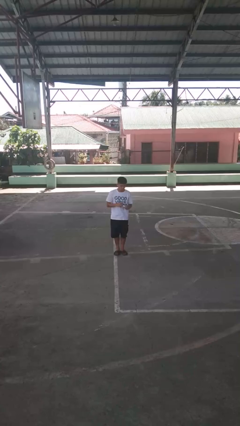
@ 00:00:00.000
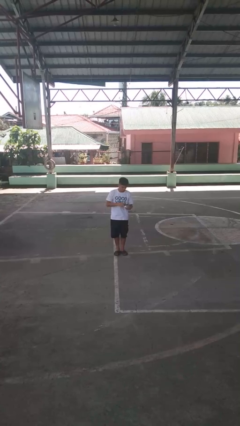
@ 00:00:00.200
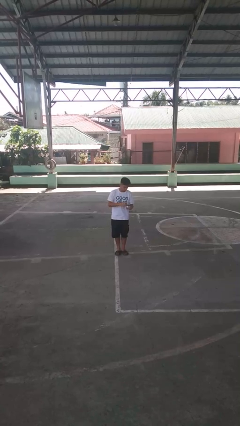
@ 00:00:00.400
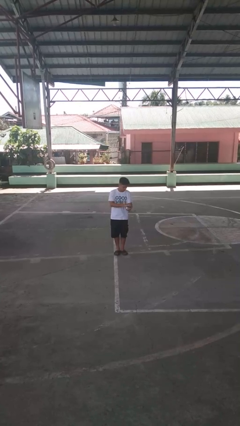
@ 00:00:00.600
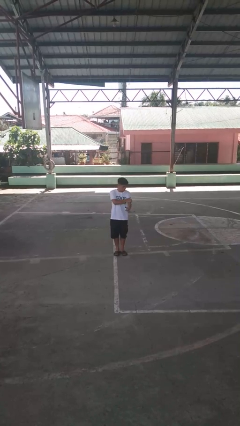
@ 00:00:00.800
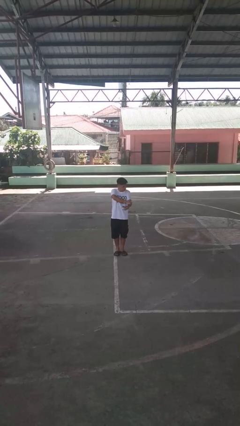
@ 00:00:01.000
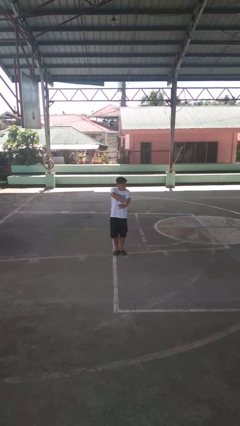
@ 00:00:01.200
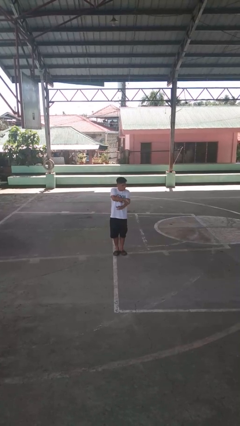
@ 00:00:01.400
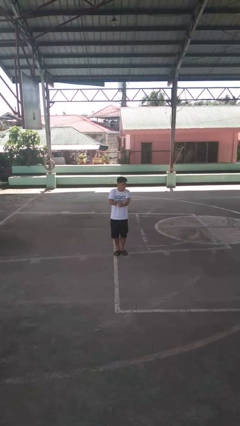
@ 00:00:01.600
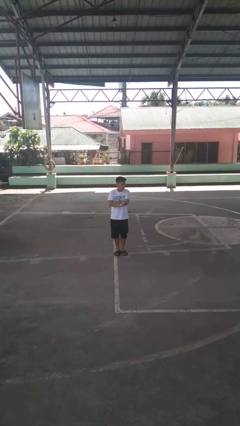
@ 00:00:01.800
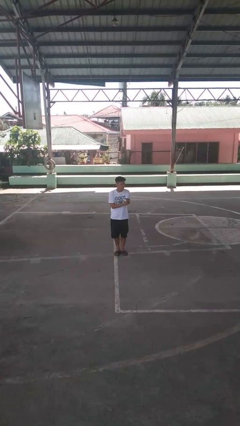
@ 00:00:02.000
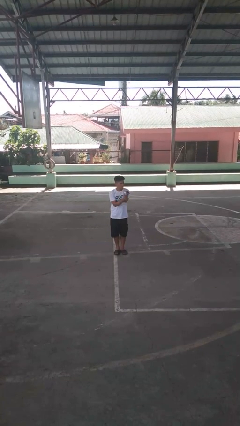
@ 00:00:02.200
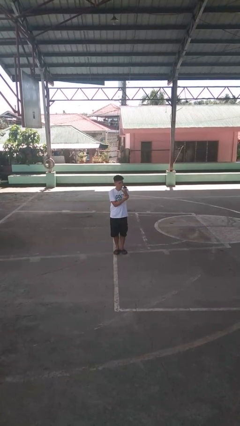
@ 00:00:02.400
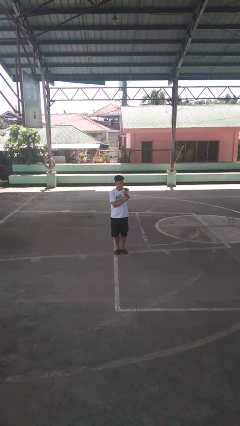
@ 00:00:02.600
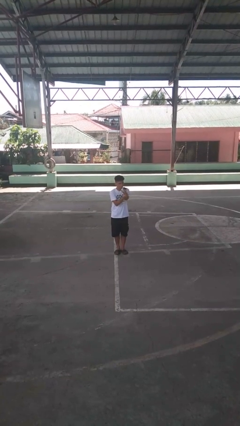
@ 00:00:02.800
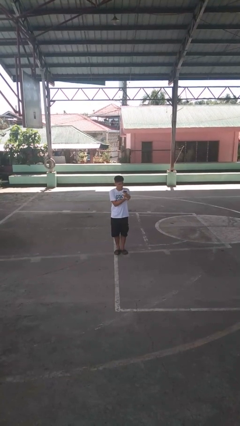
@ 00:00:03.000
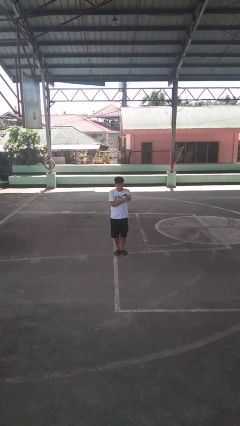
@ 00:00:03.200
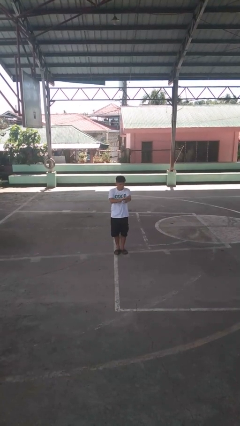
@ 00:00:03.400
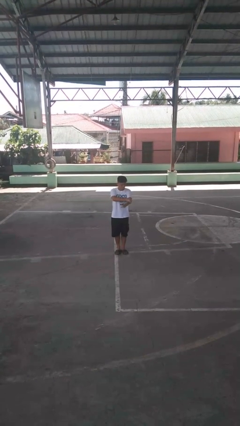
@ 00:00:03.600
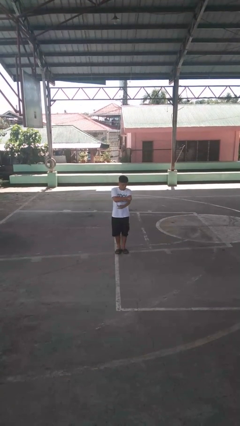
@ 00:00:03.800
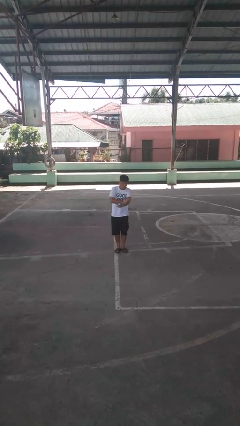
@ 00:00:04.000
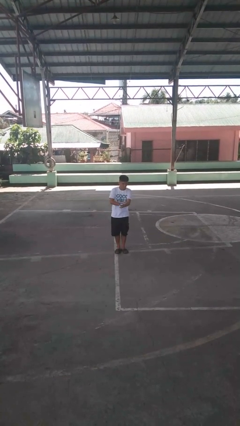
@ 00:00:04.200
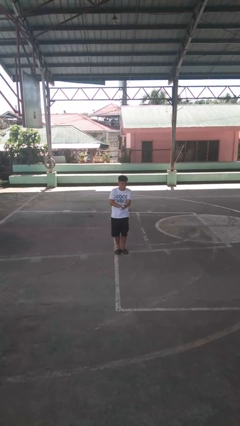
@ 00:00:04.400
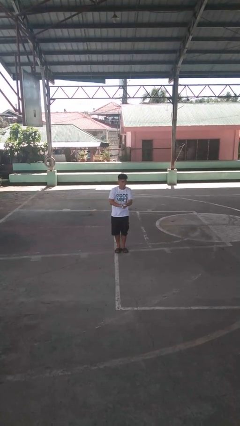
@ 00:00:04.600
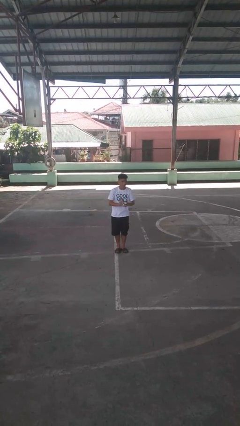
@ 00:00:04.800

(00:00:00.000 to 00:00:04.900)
person applies sunscreen

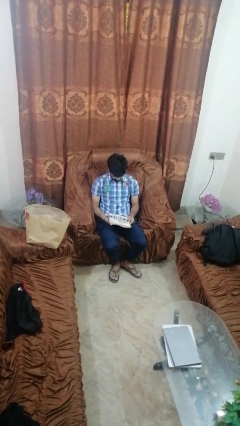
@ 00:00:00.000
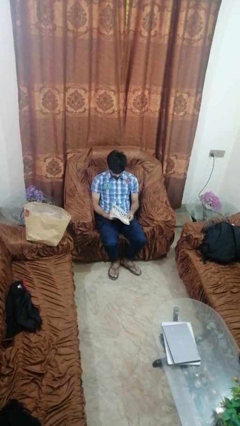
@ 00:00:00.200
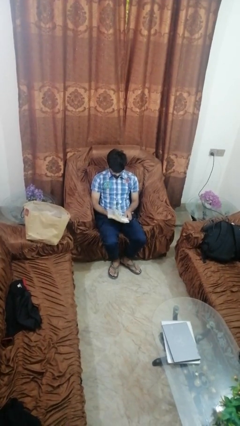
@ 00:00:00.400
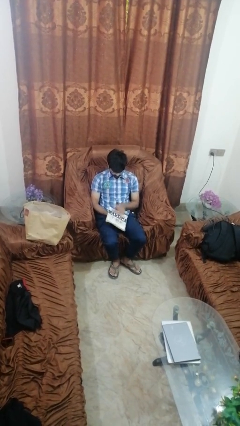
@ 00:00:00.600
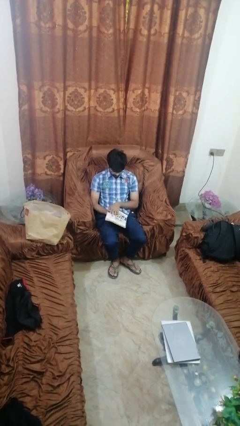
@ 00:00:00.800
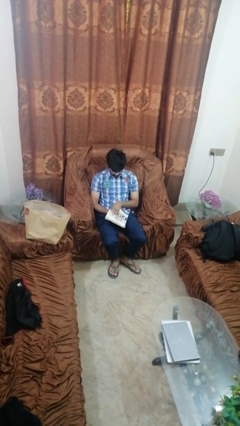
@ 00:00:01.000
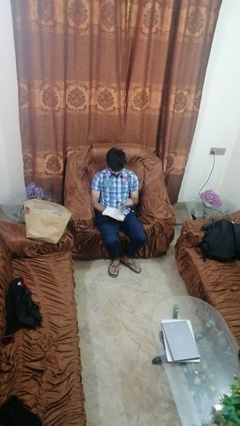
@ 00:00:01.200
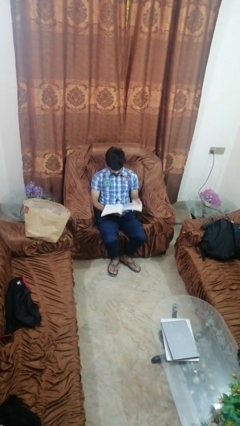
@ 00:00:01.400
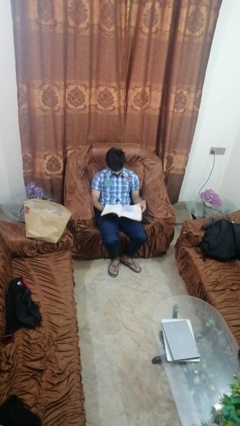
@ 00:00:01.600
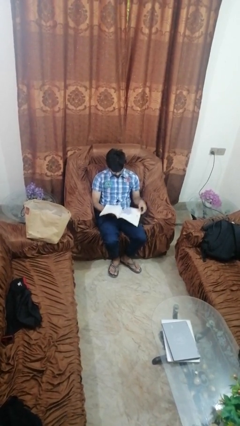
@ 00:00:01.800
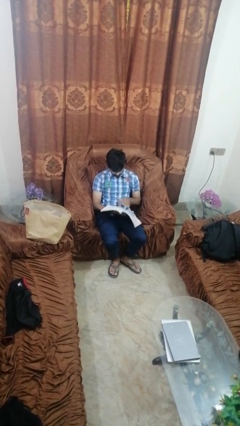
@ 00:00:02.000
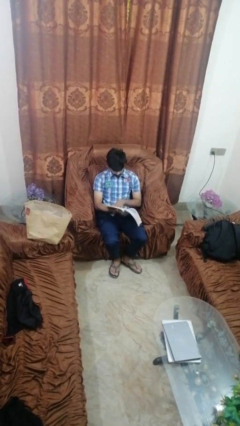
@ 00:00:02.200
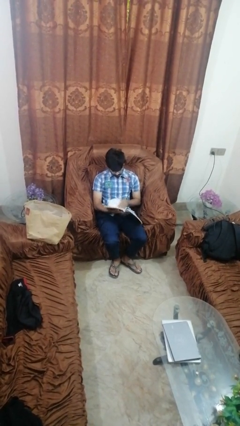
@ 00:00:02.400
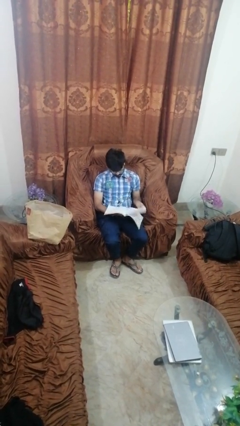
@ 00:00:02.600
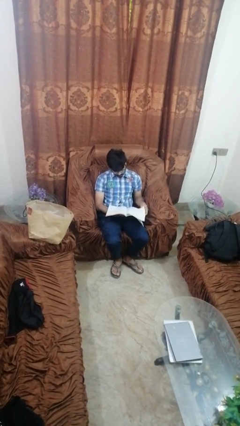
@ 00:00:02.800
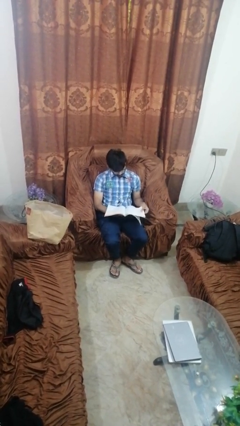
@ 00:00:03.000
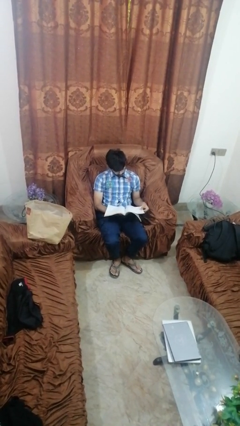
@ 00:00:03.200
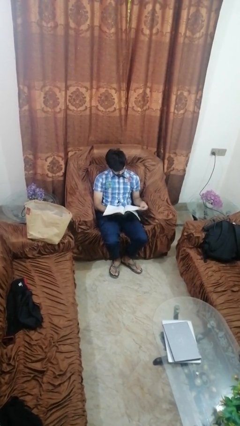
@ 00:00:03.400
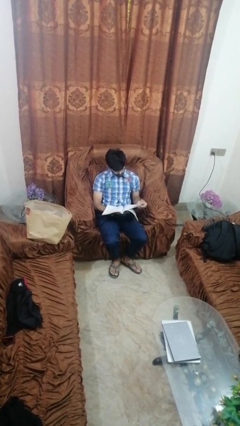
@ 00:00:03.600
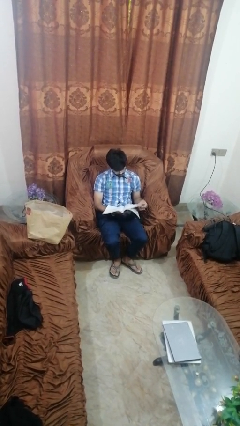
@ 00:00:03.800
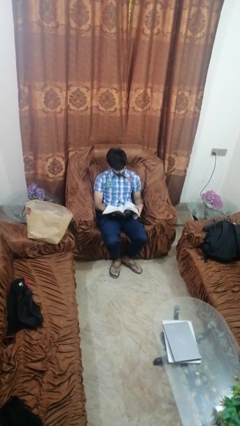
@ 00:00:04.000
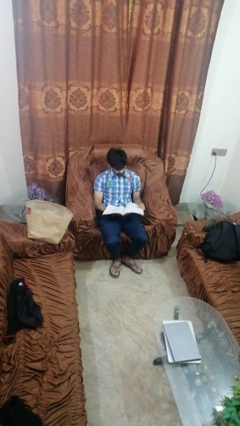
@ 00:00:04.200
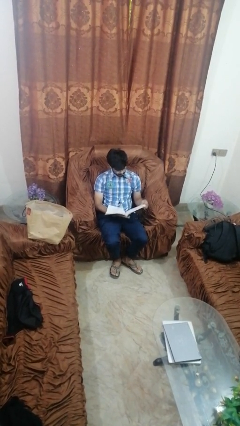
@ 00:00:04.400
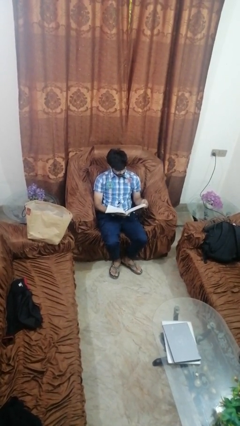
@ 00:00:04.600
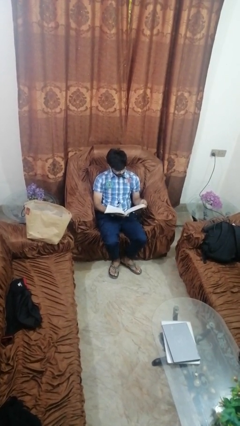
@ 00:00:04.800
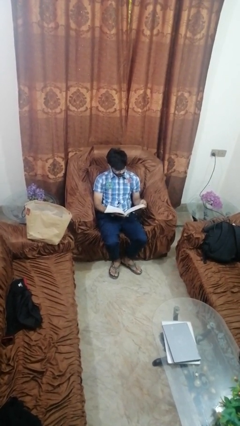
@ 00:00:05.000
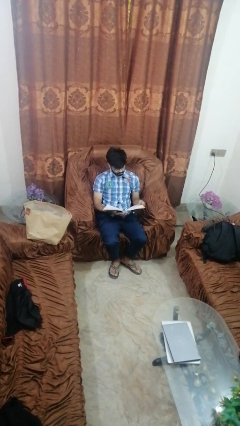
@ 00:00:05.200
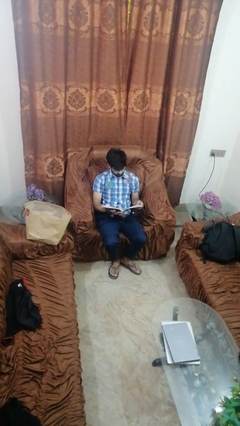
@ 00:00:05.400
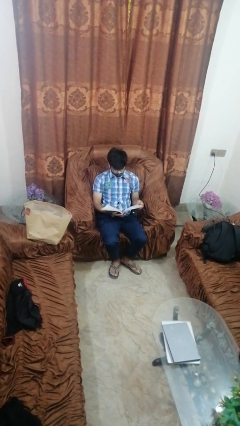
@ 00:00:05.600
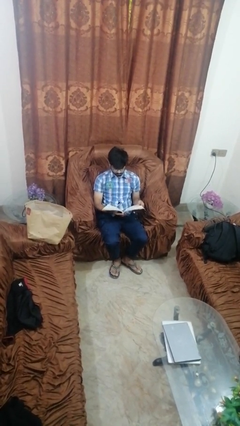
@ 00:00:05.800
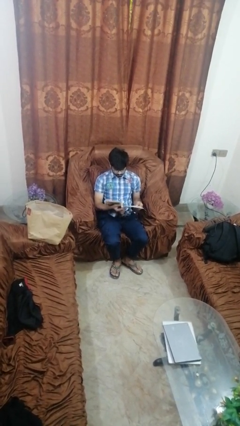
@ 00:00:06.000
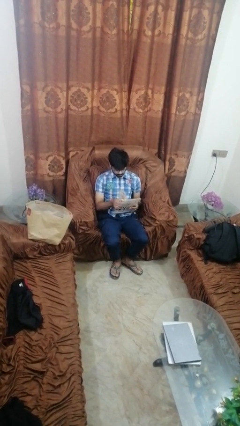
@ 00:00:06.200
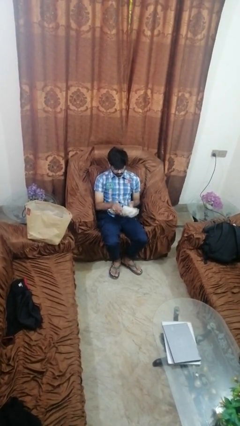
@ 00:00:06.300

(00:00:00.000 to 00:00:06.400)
person reads magazine

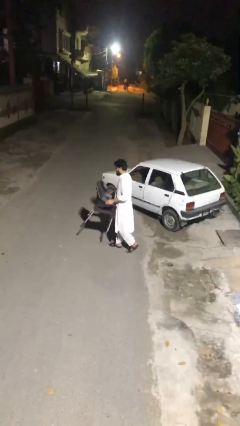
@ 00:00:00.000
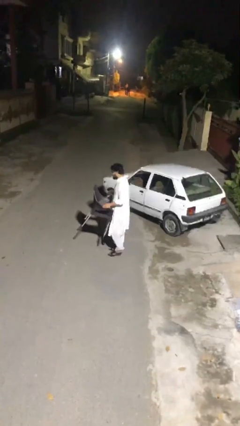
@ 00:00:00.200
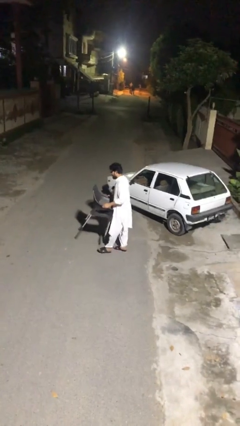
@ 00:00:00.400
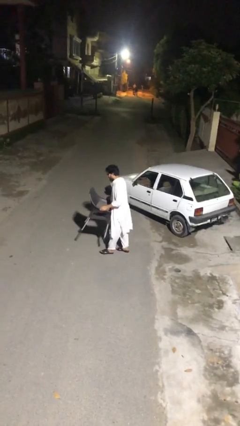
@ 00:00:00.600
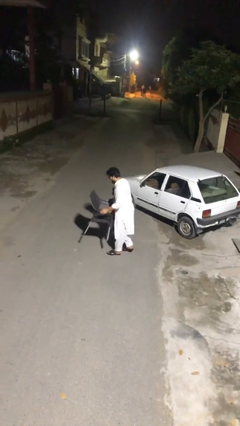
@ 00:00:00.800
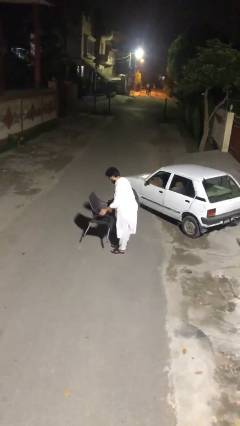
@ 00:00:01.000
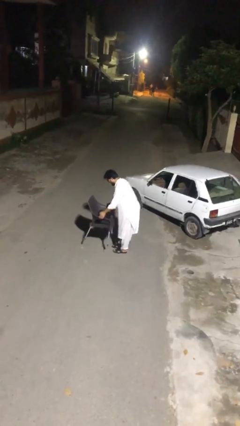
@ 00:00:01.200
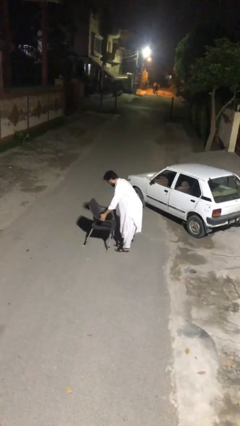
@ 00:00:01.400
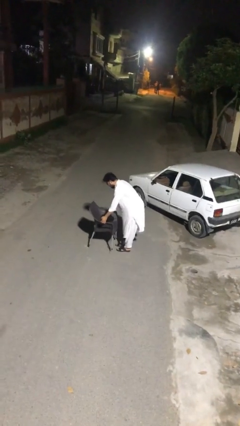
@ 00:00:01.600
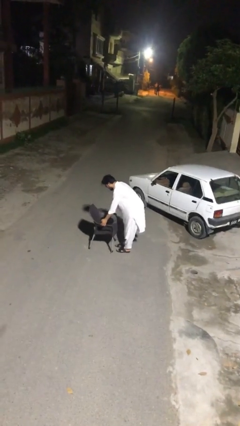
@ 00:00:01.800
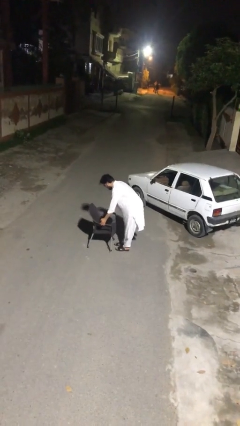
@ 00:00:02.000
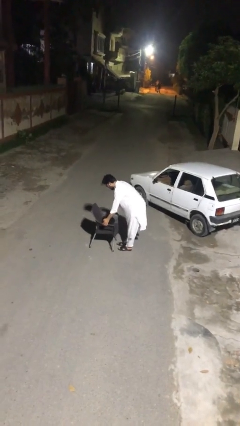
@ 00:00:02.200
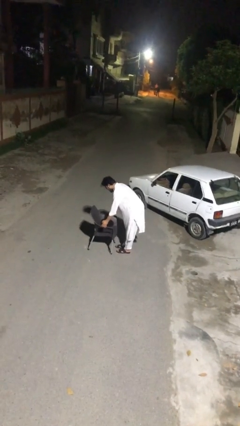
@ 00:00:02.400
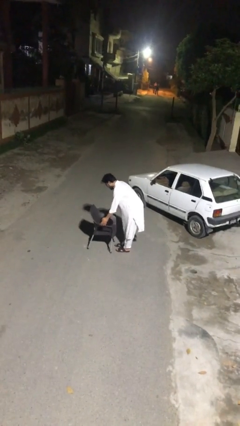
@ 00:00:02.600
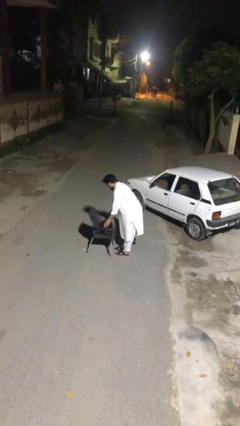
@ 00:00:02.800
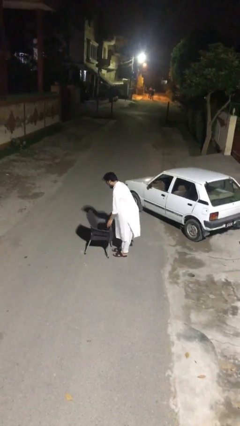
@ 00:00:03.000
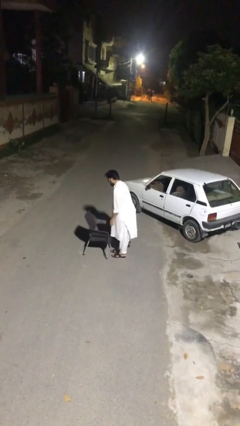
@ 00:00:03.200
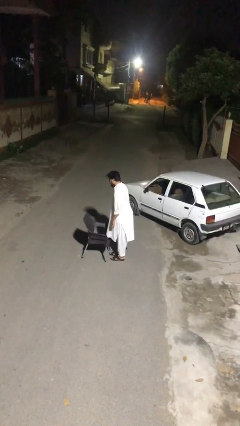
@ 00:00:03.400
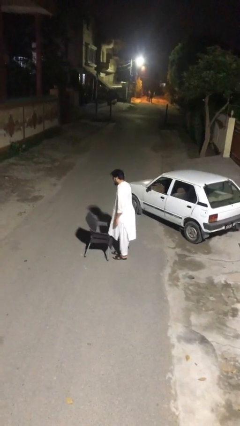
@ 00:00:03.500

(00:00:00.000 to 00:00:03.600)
person puts down object on floor

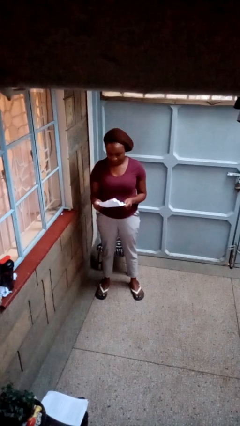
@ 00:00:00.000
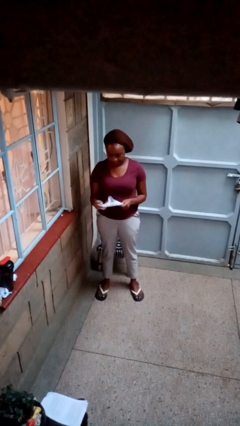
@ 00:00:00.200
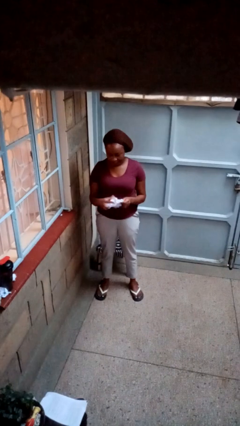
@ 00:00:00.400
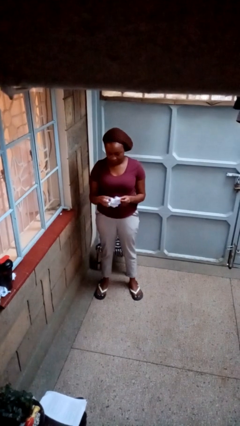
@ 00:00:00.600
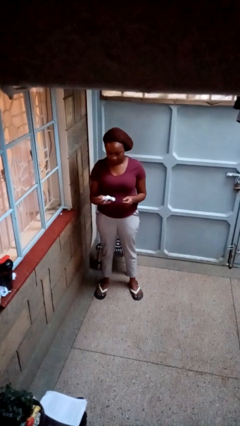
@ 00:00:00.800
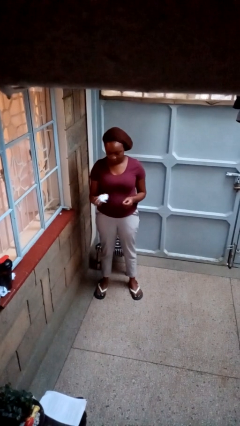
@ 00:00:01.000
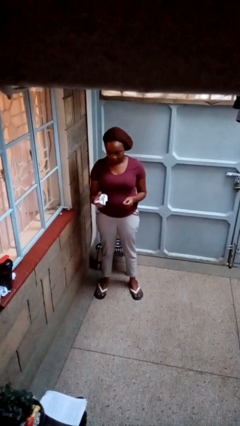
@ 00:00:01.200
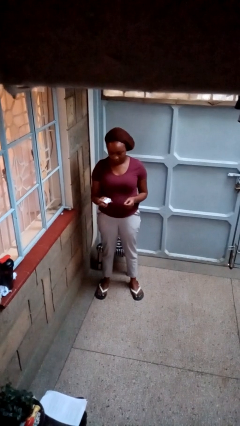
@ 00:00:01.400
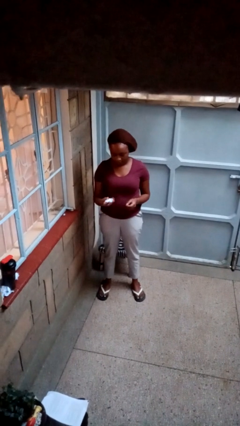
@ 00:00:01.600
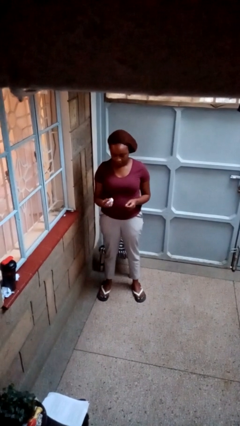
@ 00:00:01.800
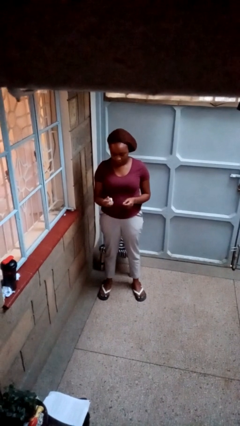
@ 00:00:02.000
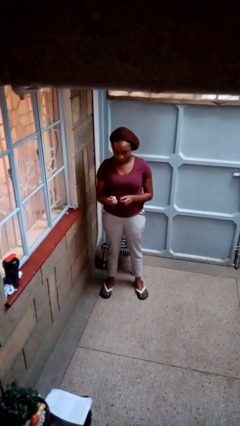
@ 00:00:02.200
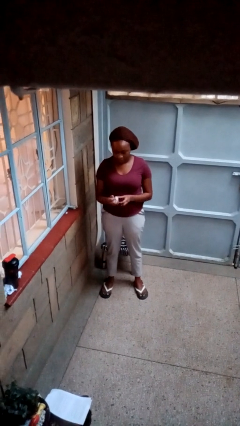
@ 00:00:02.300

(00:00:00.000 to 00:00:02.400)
person crumples paper
